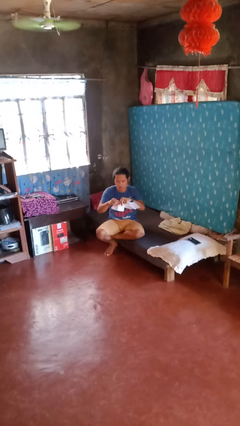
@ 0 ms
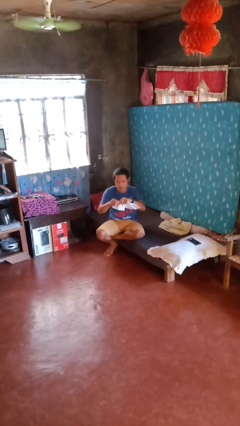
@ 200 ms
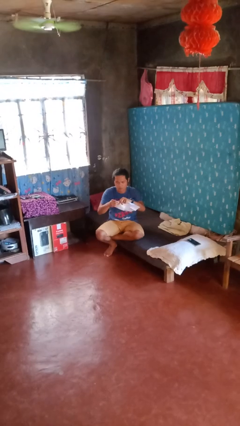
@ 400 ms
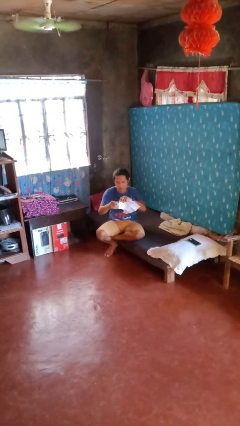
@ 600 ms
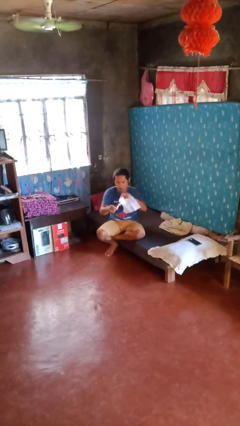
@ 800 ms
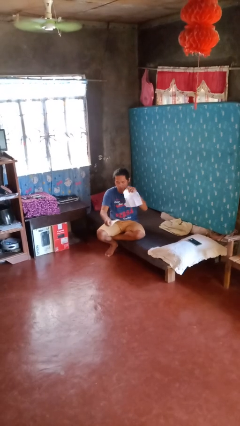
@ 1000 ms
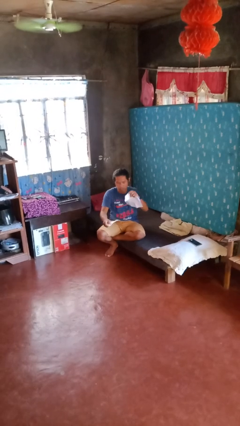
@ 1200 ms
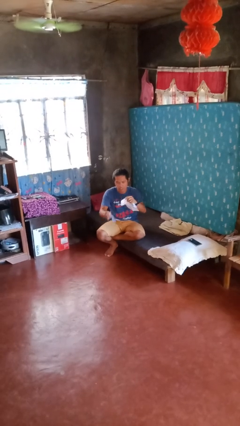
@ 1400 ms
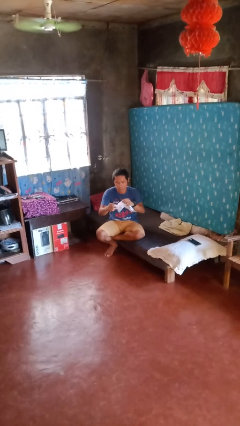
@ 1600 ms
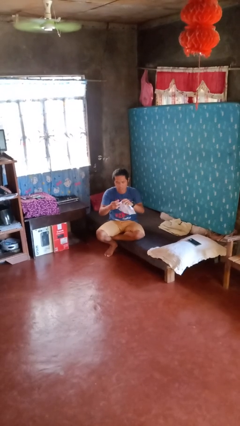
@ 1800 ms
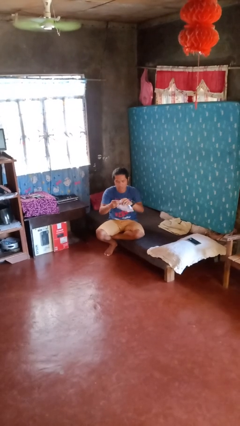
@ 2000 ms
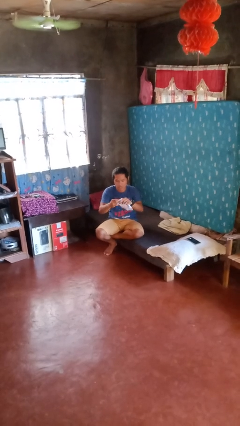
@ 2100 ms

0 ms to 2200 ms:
person tears paper

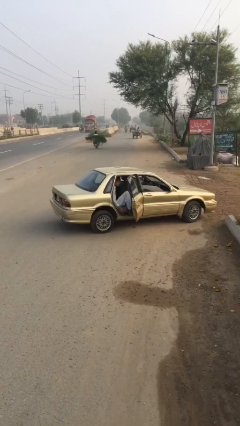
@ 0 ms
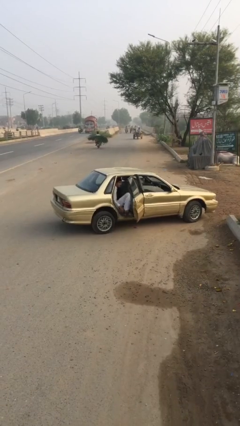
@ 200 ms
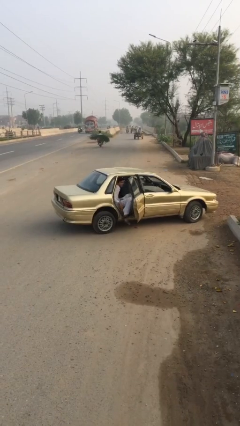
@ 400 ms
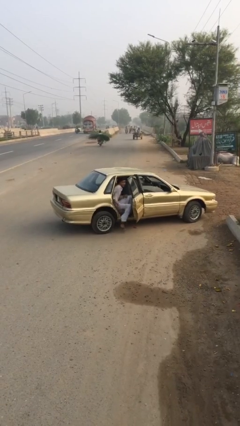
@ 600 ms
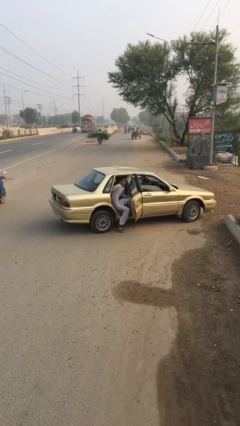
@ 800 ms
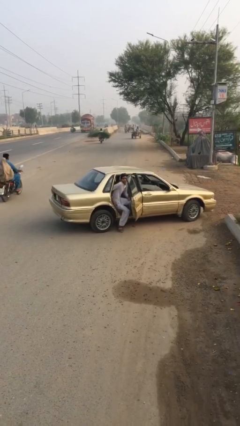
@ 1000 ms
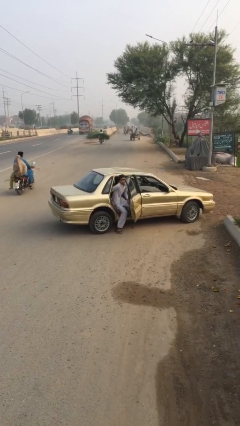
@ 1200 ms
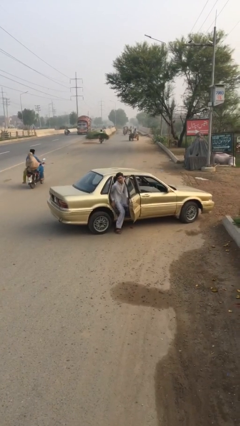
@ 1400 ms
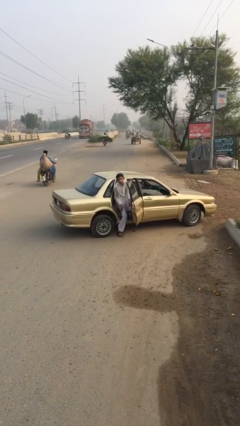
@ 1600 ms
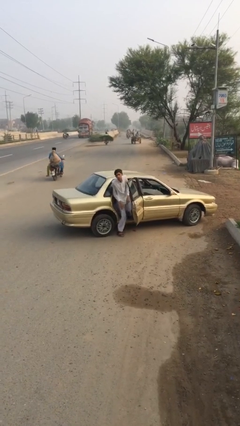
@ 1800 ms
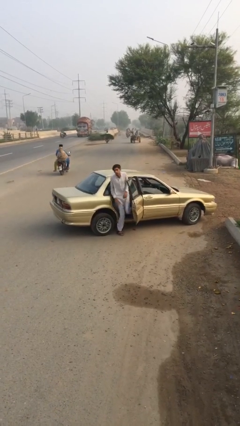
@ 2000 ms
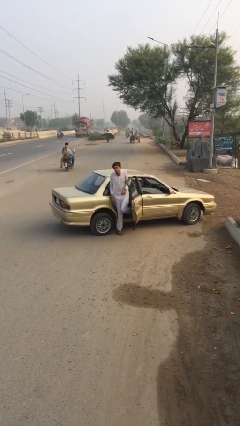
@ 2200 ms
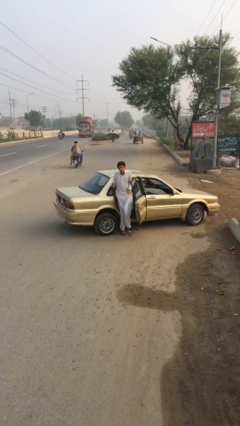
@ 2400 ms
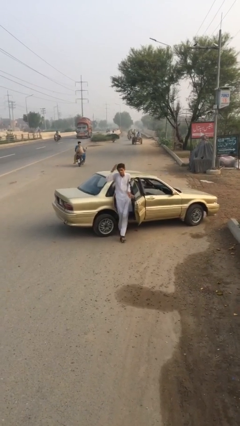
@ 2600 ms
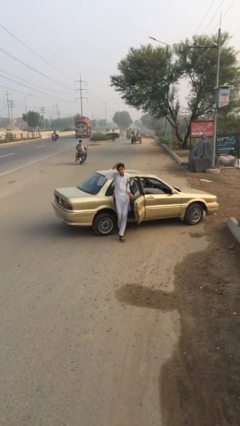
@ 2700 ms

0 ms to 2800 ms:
person exits car

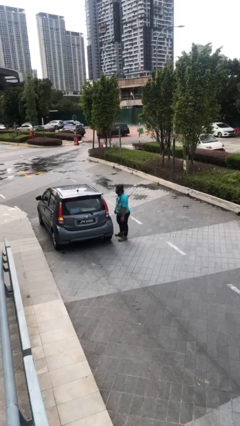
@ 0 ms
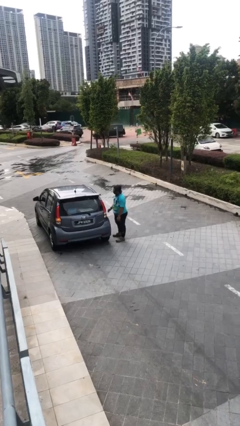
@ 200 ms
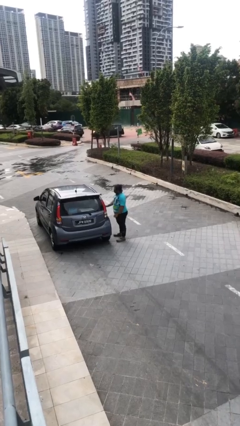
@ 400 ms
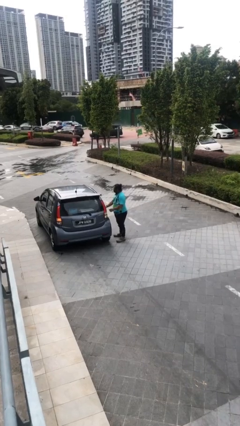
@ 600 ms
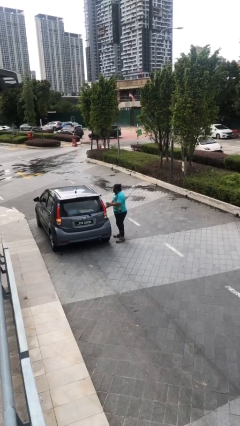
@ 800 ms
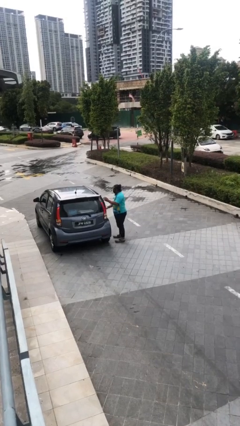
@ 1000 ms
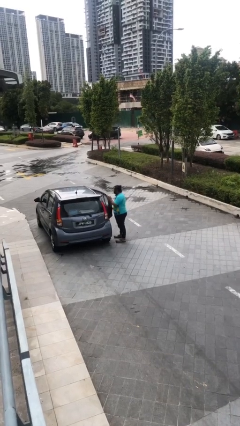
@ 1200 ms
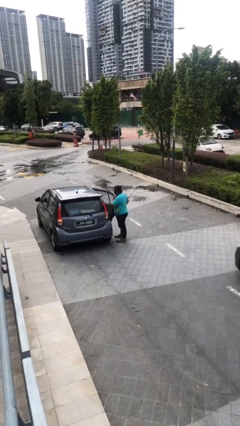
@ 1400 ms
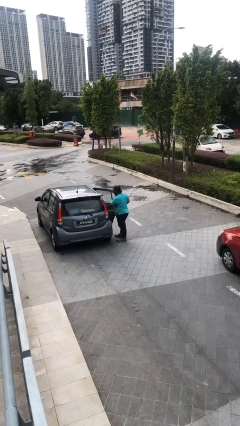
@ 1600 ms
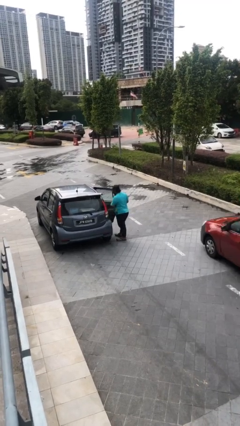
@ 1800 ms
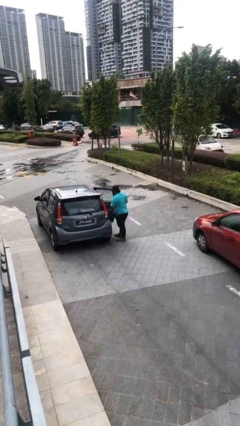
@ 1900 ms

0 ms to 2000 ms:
person opens car door
